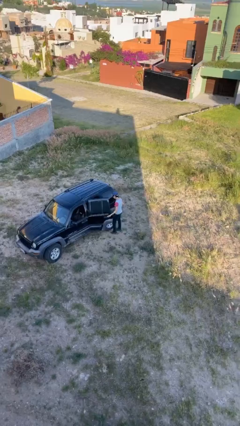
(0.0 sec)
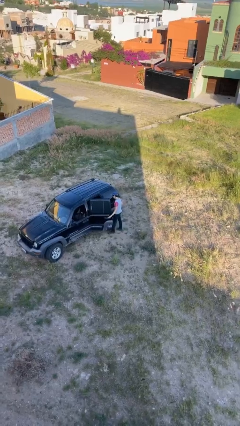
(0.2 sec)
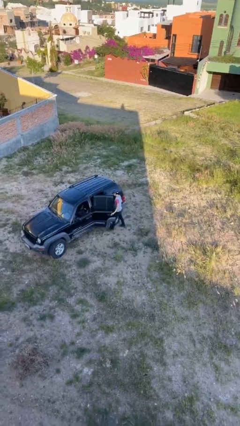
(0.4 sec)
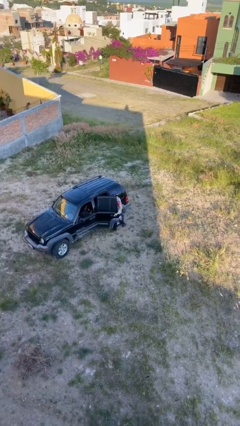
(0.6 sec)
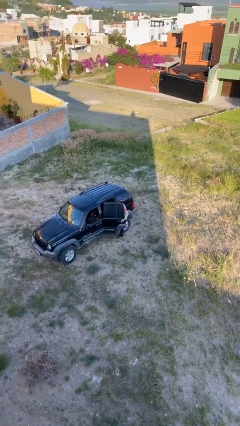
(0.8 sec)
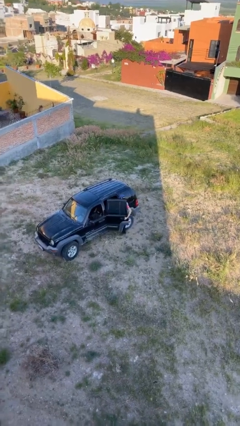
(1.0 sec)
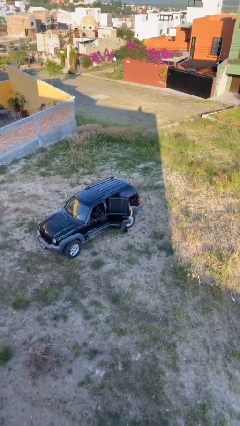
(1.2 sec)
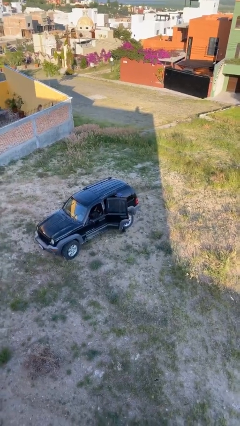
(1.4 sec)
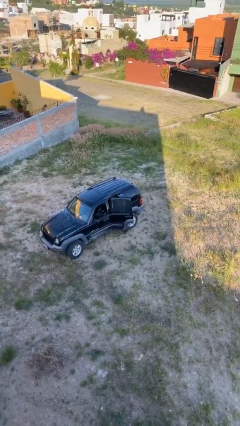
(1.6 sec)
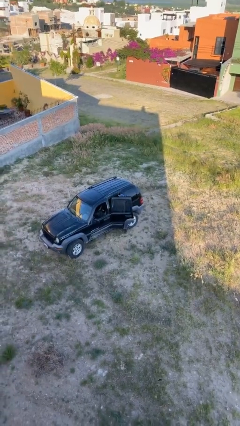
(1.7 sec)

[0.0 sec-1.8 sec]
person opens car door

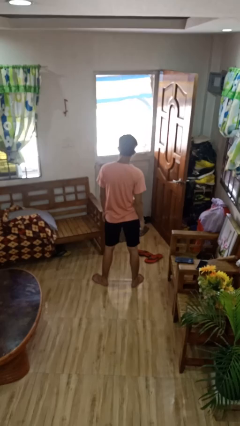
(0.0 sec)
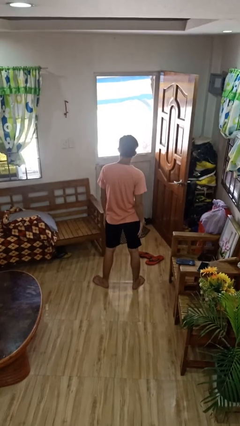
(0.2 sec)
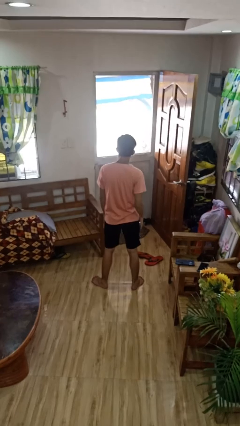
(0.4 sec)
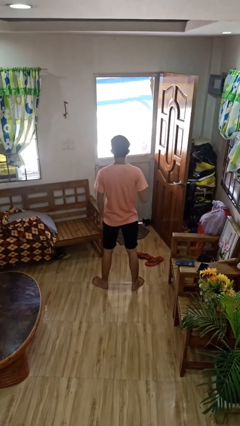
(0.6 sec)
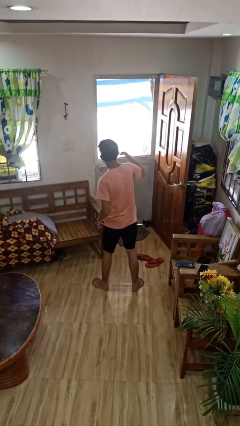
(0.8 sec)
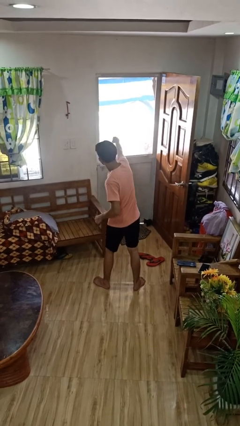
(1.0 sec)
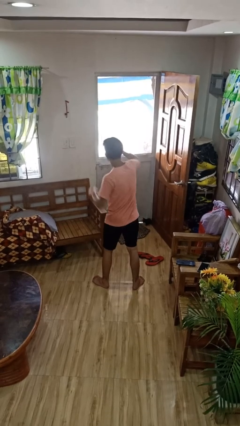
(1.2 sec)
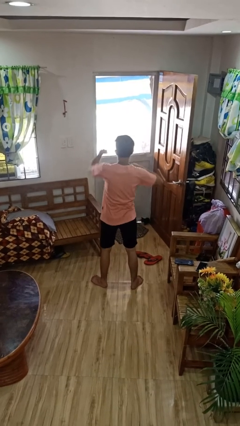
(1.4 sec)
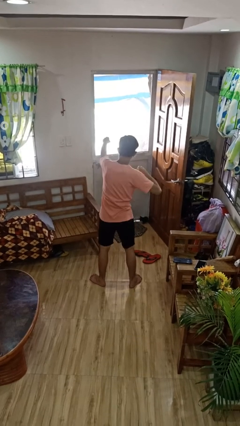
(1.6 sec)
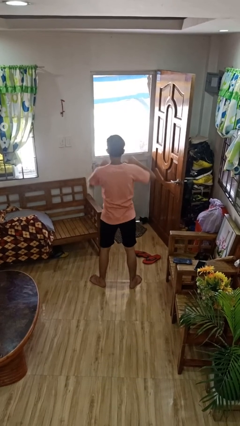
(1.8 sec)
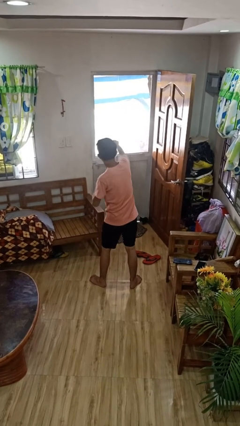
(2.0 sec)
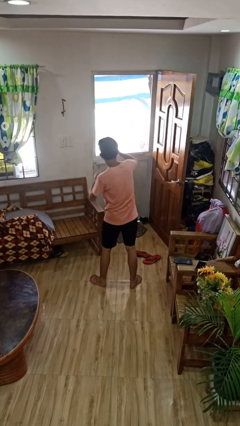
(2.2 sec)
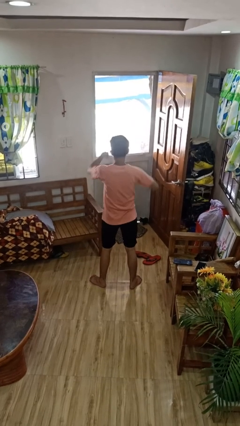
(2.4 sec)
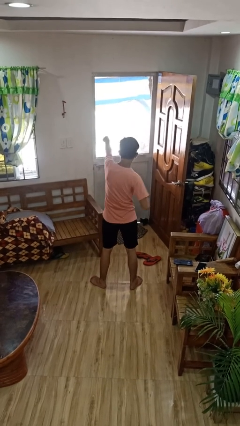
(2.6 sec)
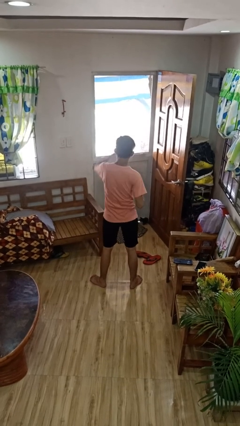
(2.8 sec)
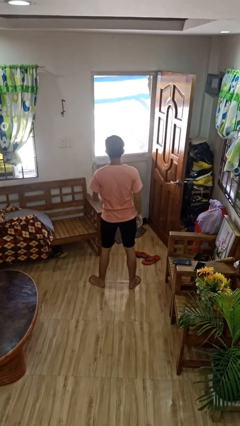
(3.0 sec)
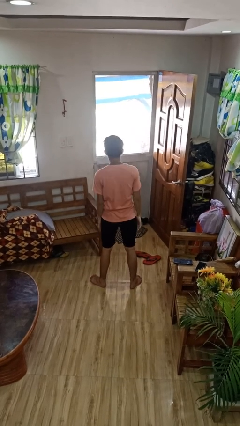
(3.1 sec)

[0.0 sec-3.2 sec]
person punches

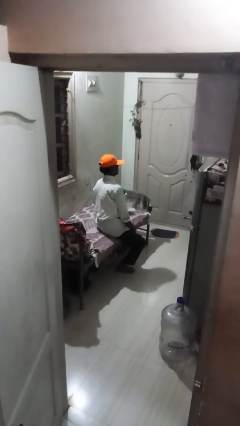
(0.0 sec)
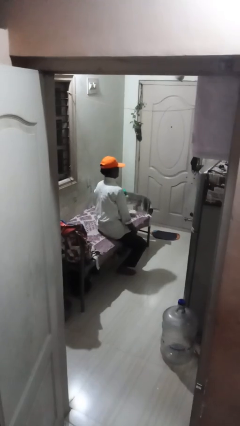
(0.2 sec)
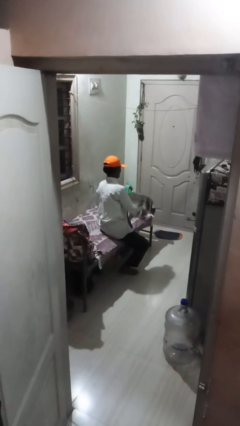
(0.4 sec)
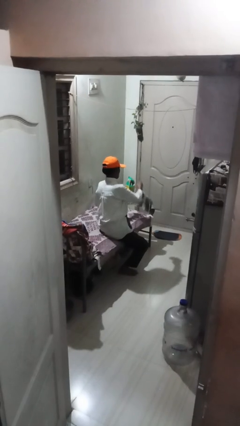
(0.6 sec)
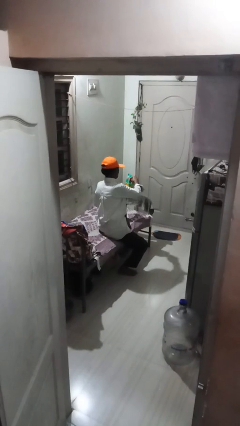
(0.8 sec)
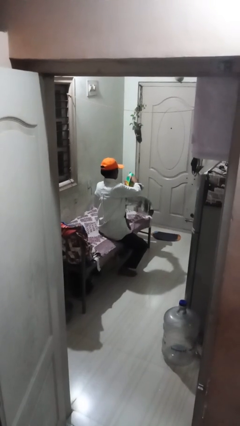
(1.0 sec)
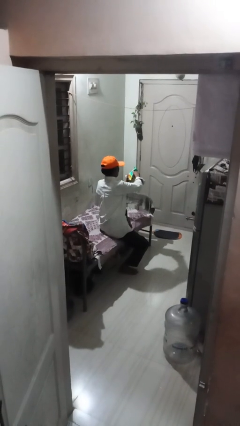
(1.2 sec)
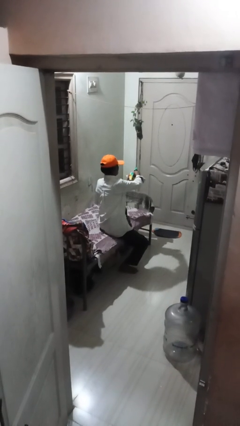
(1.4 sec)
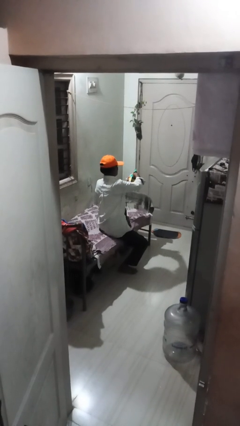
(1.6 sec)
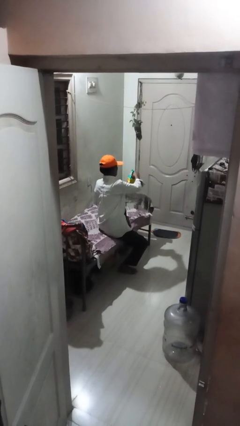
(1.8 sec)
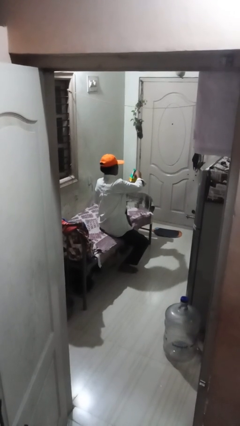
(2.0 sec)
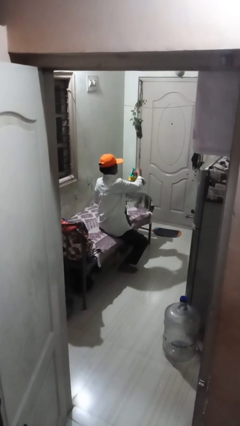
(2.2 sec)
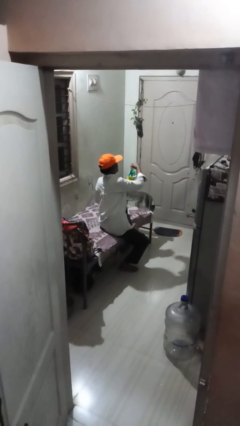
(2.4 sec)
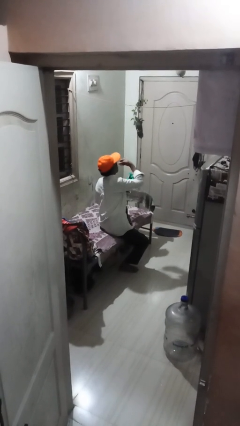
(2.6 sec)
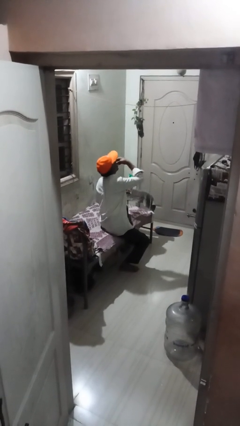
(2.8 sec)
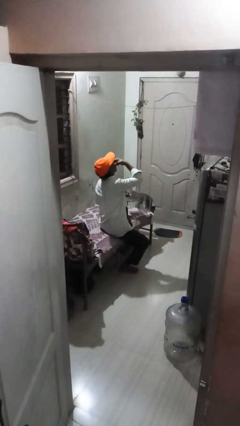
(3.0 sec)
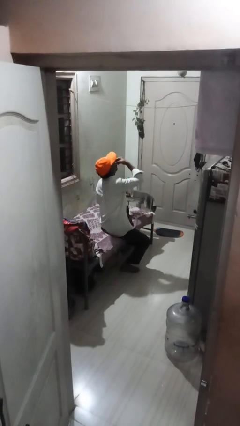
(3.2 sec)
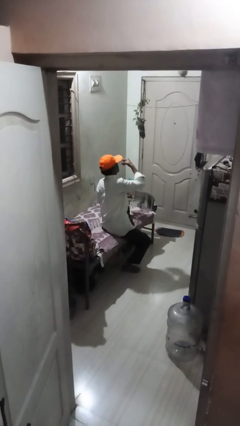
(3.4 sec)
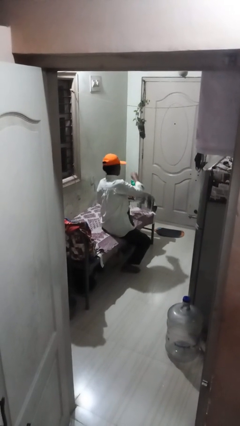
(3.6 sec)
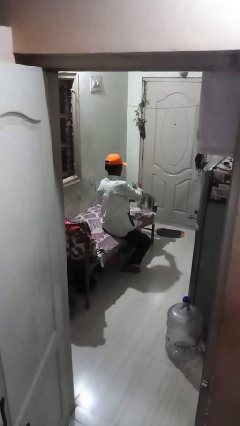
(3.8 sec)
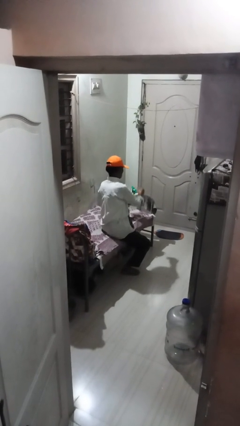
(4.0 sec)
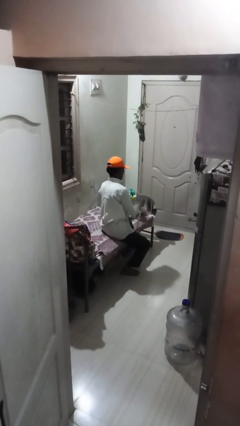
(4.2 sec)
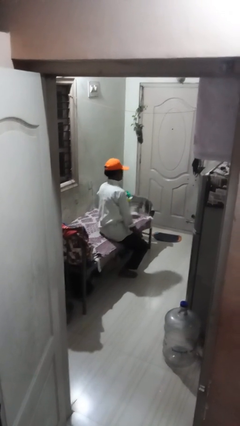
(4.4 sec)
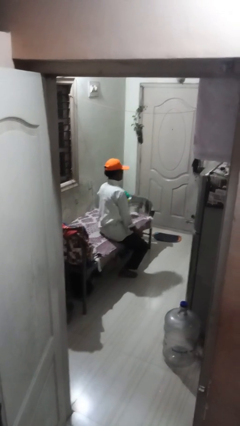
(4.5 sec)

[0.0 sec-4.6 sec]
person eats snack from bag

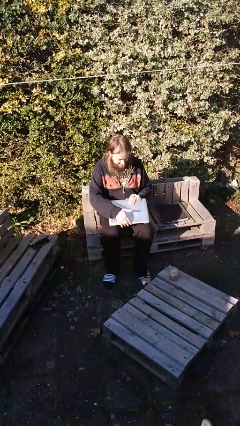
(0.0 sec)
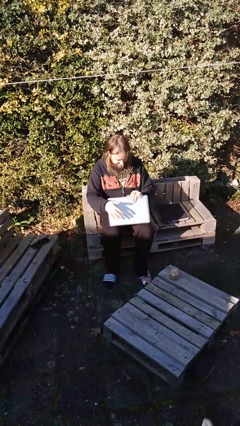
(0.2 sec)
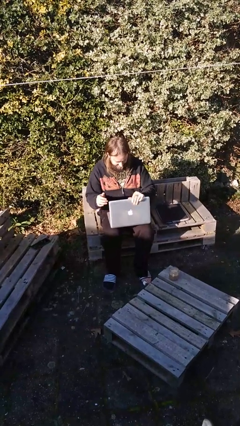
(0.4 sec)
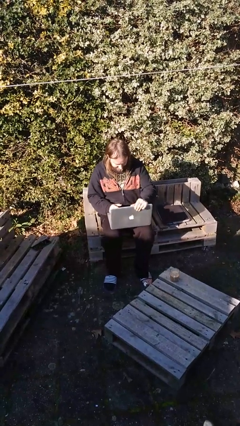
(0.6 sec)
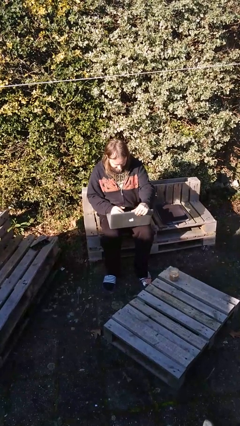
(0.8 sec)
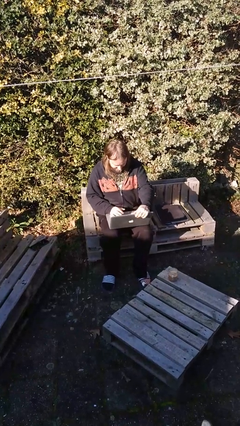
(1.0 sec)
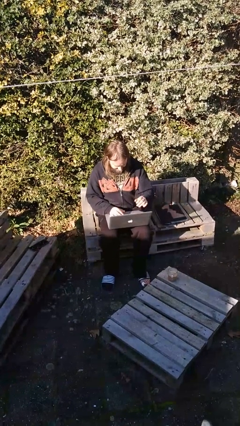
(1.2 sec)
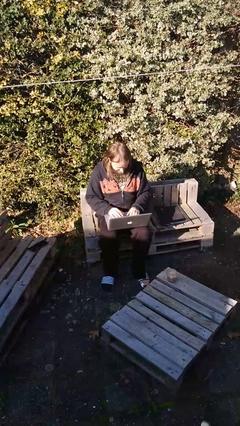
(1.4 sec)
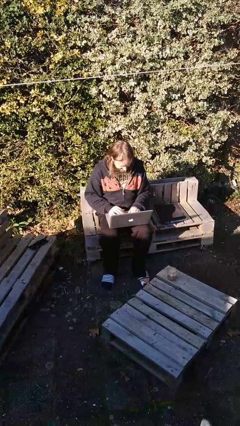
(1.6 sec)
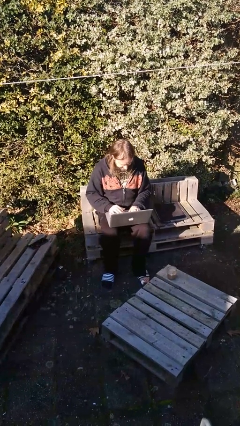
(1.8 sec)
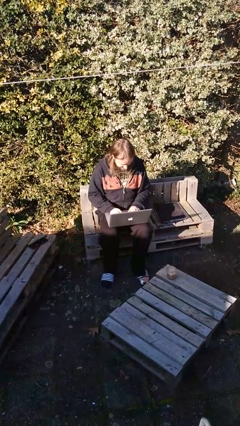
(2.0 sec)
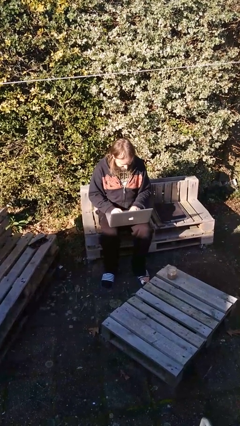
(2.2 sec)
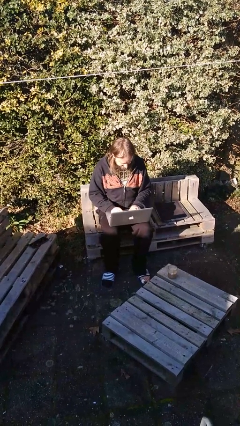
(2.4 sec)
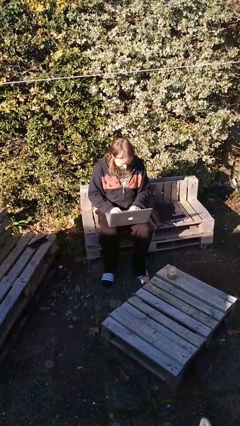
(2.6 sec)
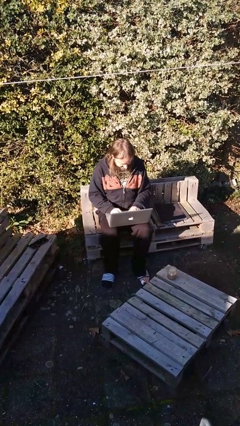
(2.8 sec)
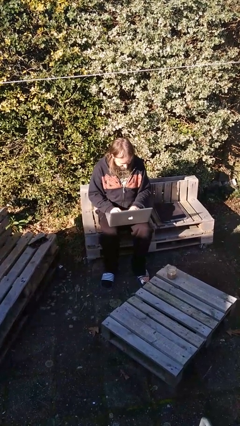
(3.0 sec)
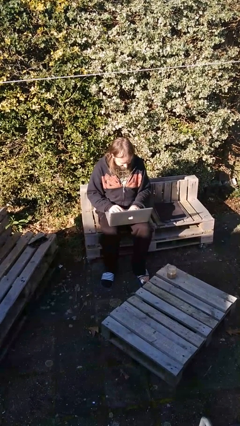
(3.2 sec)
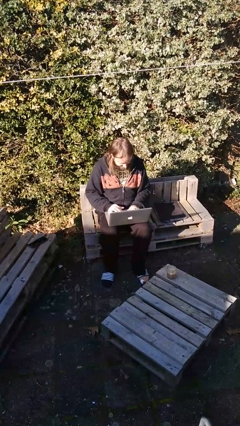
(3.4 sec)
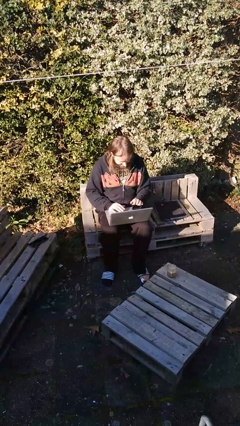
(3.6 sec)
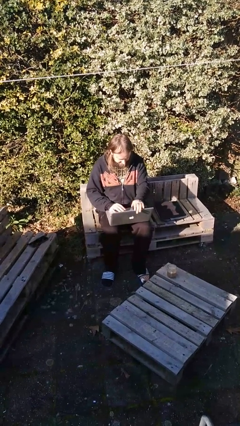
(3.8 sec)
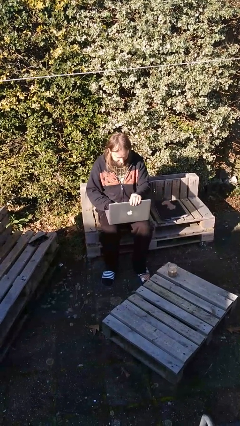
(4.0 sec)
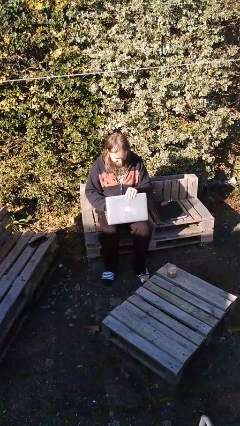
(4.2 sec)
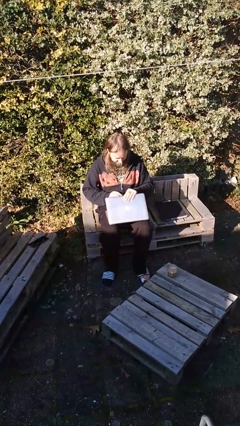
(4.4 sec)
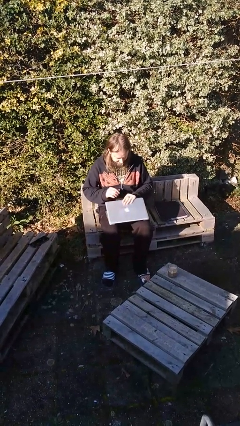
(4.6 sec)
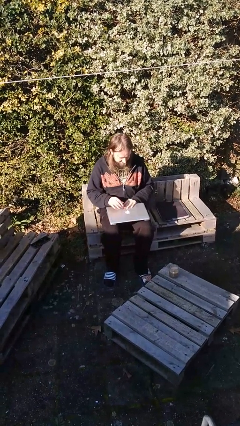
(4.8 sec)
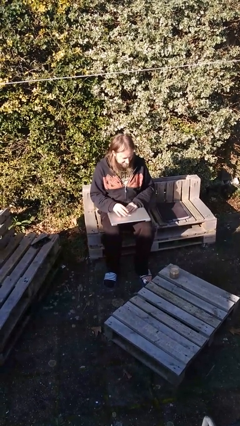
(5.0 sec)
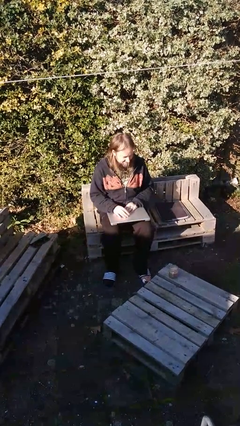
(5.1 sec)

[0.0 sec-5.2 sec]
person interacts with laptop

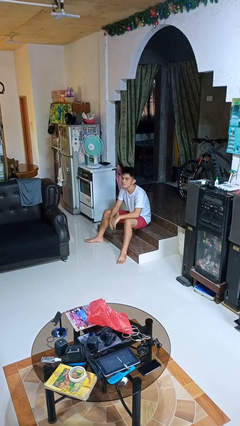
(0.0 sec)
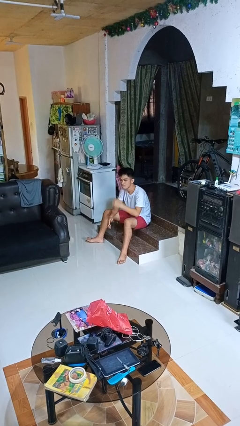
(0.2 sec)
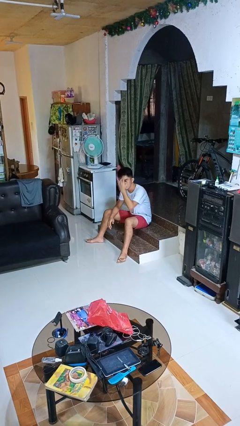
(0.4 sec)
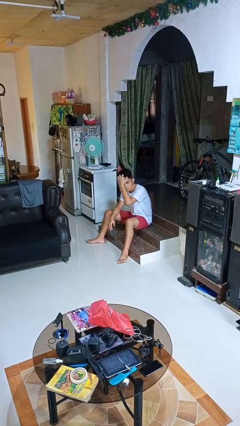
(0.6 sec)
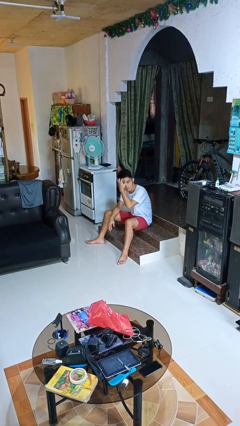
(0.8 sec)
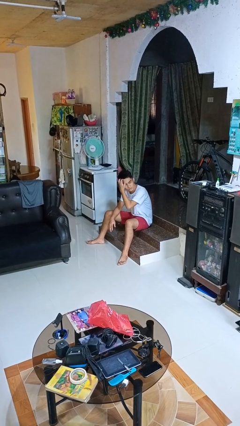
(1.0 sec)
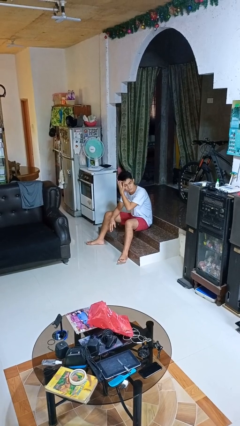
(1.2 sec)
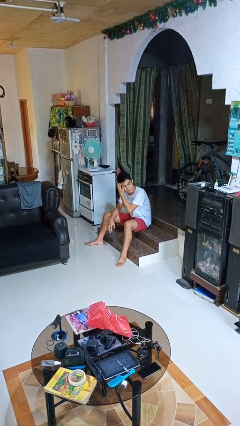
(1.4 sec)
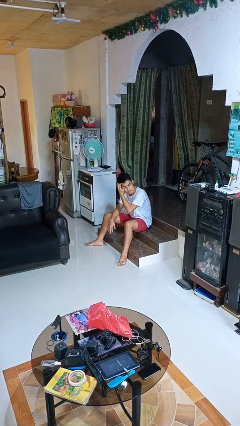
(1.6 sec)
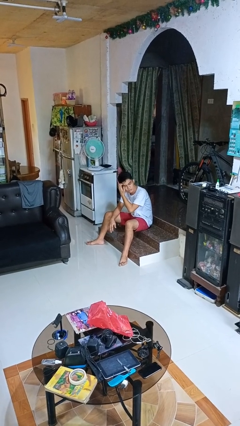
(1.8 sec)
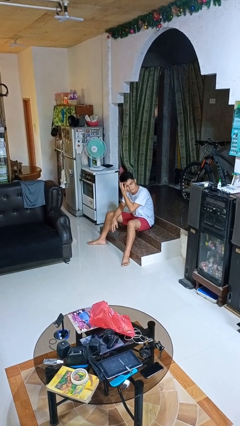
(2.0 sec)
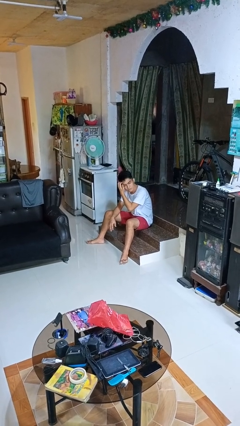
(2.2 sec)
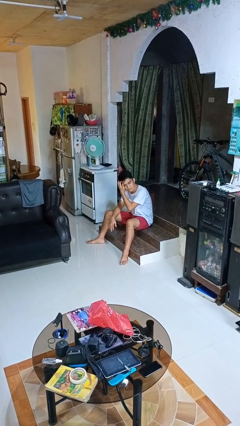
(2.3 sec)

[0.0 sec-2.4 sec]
person scratches face

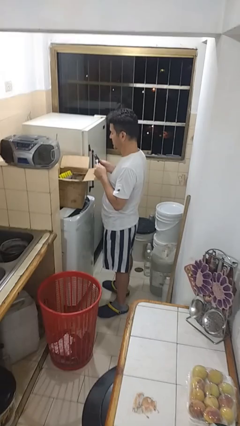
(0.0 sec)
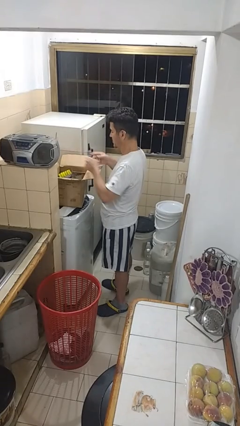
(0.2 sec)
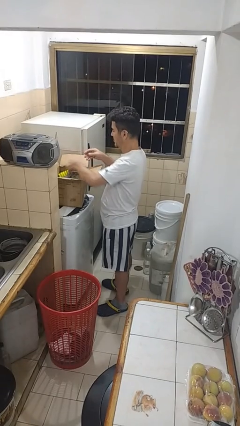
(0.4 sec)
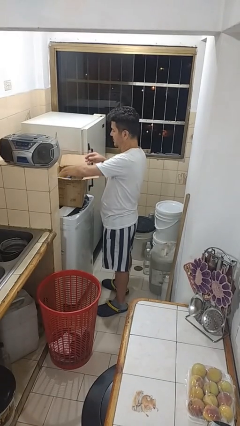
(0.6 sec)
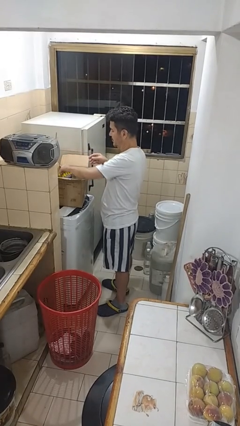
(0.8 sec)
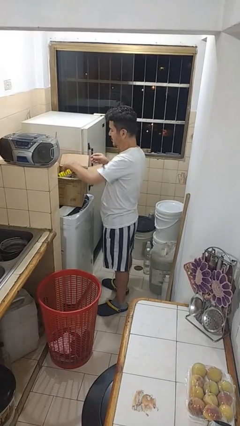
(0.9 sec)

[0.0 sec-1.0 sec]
person puts object into box
